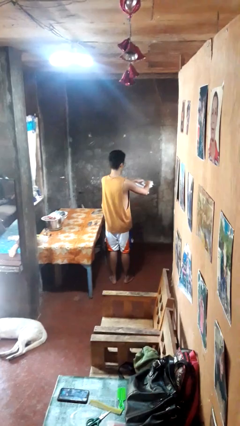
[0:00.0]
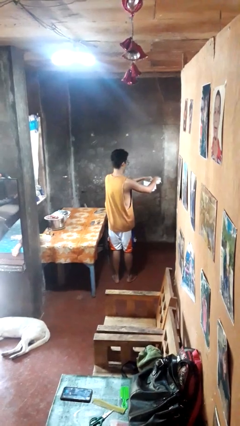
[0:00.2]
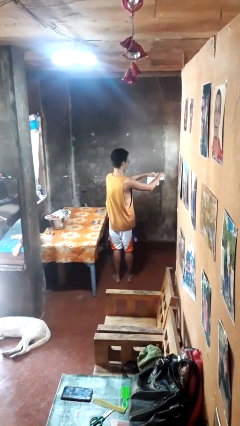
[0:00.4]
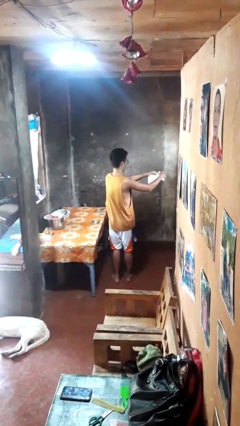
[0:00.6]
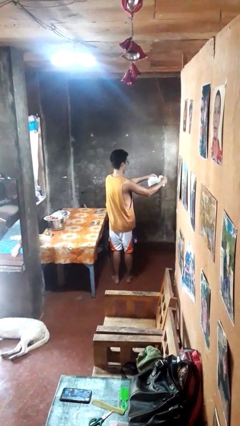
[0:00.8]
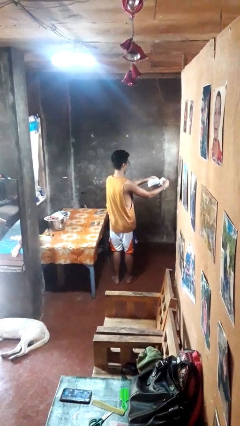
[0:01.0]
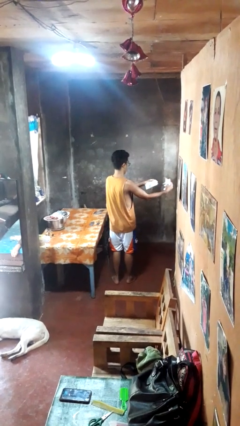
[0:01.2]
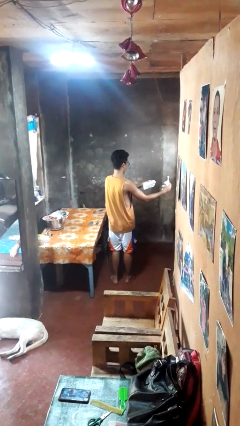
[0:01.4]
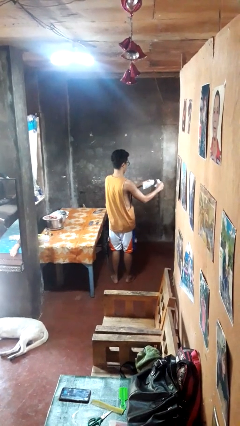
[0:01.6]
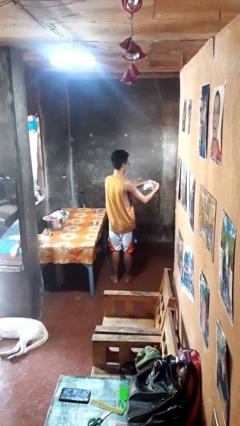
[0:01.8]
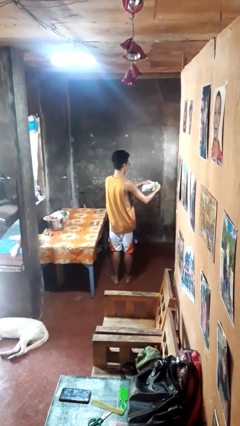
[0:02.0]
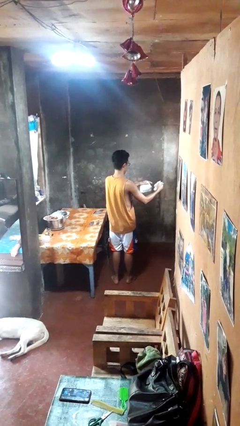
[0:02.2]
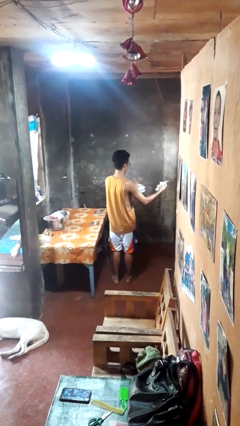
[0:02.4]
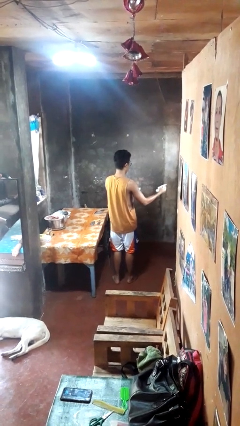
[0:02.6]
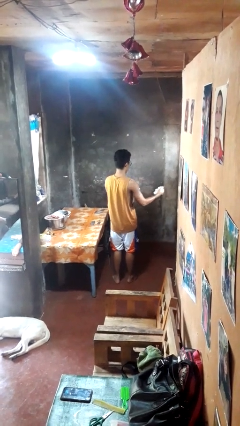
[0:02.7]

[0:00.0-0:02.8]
person tears paper

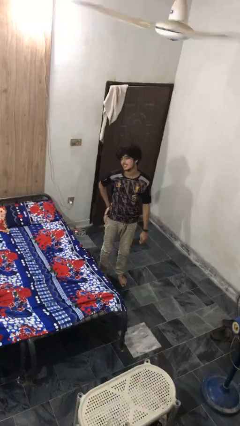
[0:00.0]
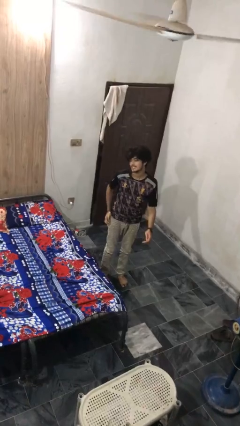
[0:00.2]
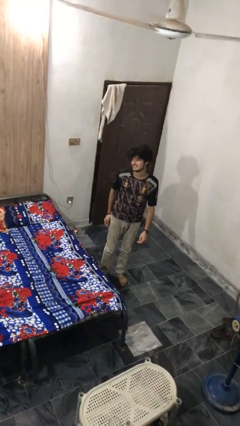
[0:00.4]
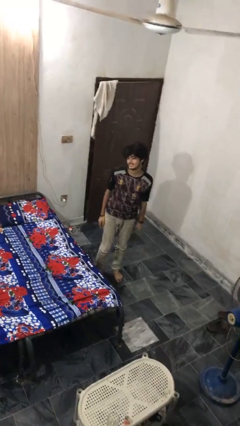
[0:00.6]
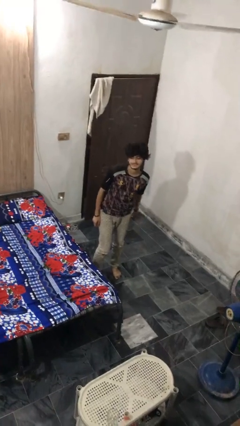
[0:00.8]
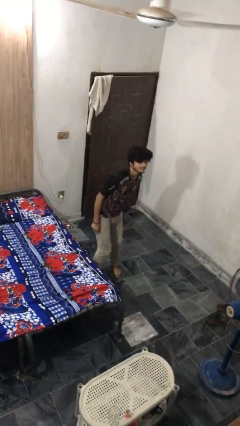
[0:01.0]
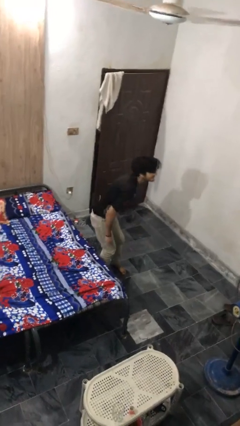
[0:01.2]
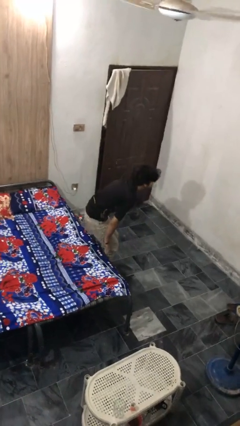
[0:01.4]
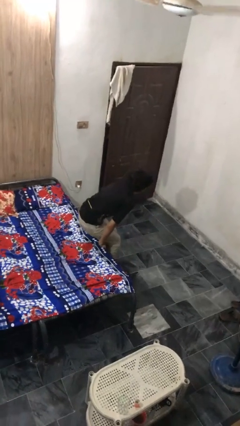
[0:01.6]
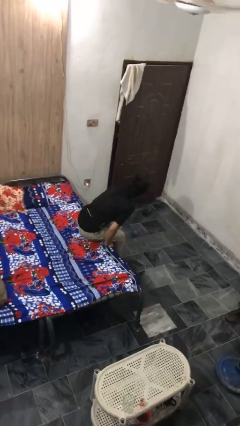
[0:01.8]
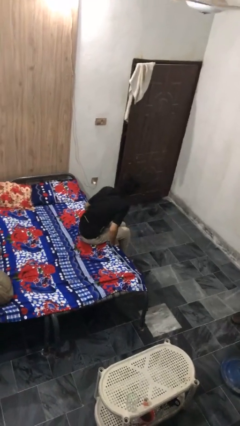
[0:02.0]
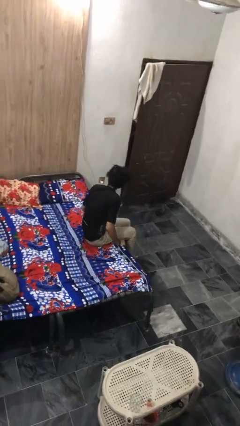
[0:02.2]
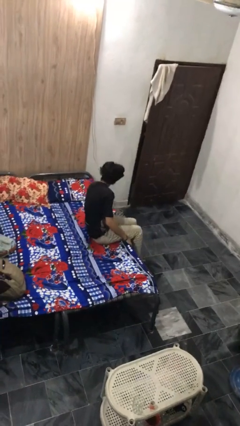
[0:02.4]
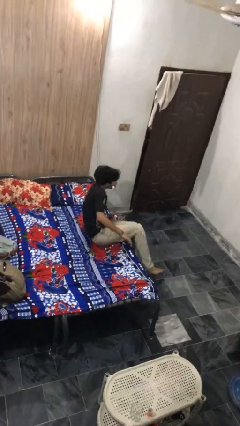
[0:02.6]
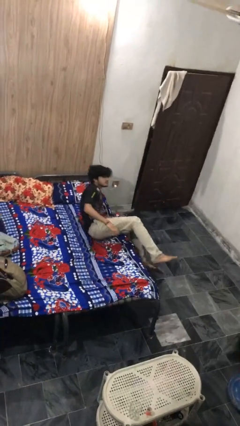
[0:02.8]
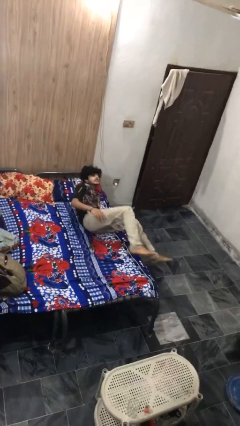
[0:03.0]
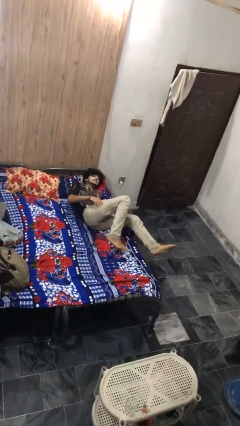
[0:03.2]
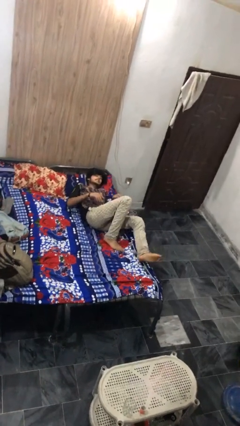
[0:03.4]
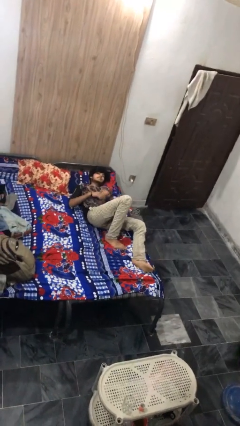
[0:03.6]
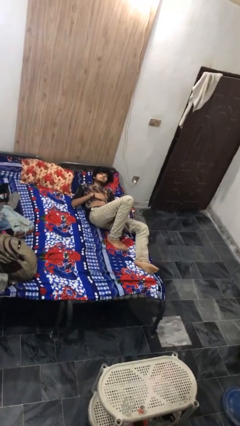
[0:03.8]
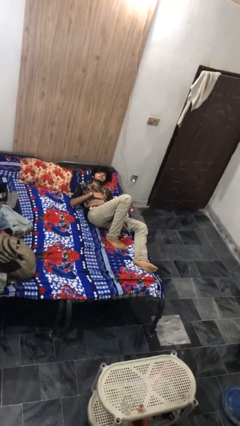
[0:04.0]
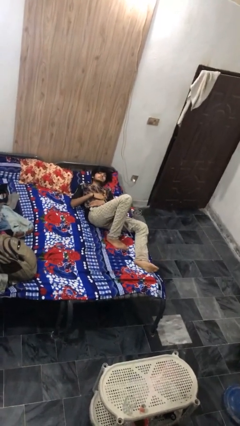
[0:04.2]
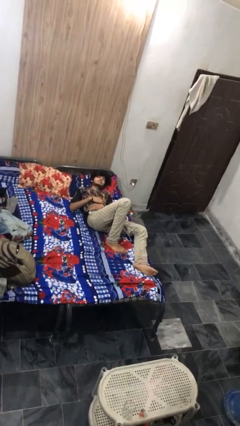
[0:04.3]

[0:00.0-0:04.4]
person lies down on bed

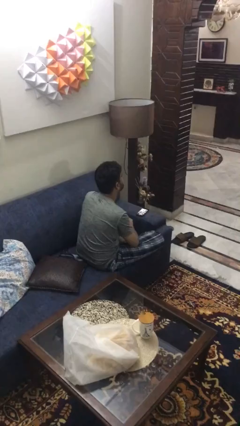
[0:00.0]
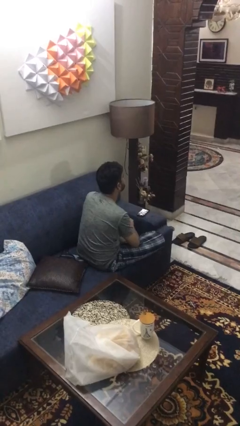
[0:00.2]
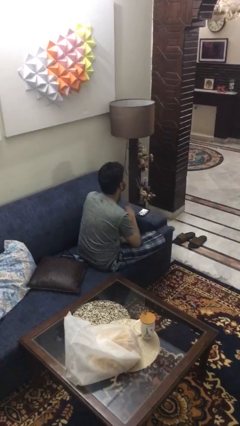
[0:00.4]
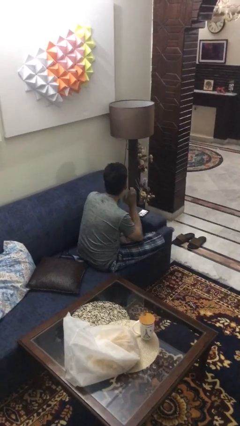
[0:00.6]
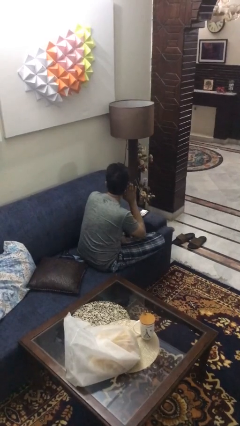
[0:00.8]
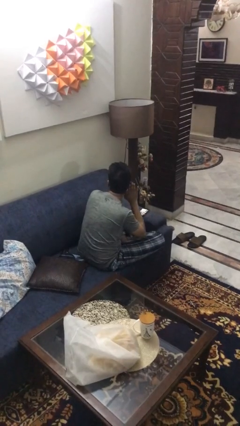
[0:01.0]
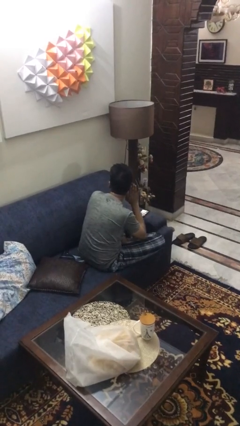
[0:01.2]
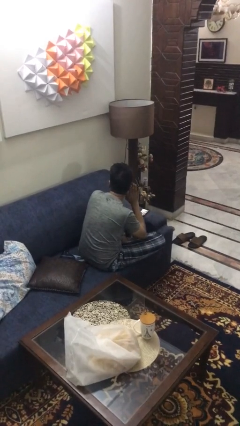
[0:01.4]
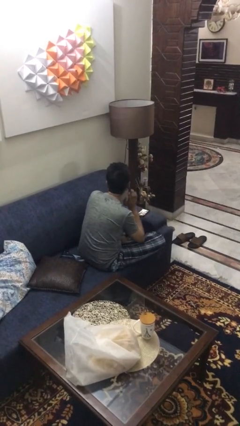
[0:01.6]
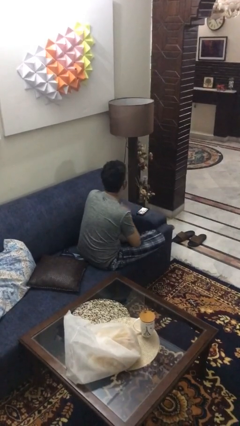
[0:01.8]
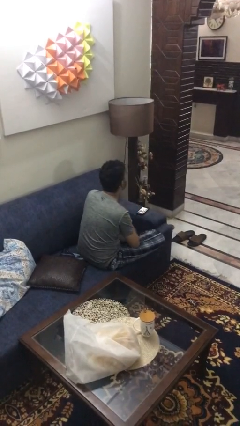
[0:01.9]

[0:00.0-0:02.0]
person gestures listen closely

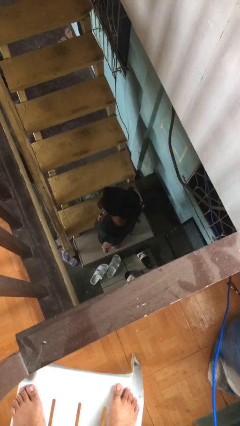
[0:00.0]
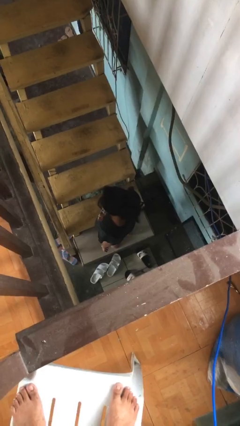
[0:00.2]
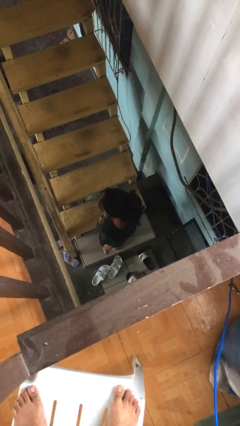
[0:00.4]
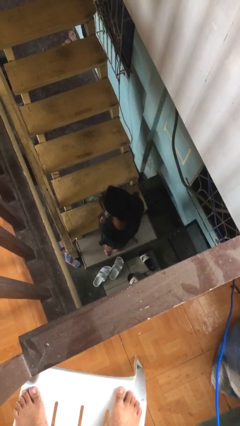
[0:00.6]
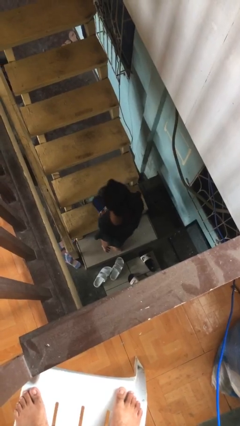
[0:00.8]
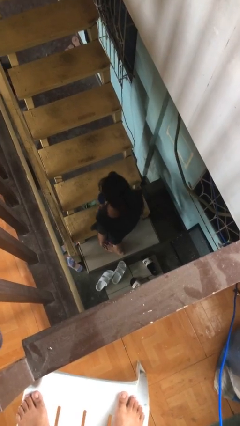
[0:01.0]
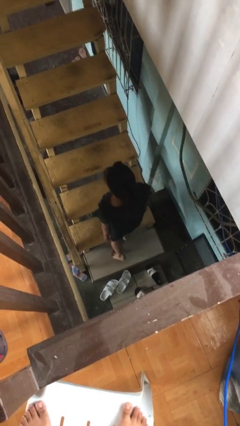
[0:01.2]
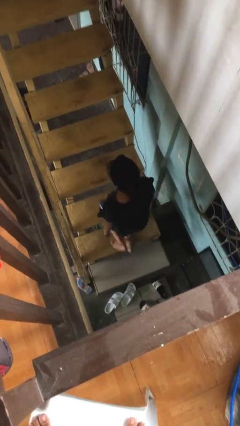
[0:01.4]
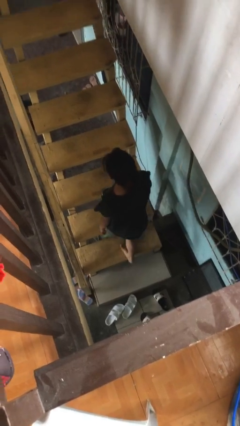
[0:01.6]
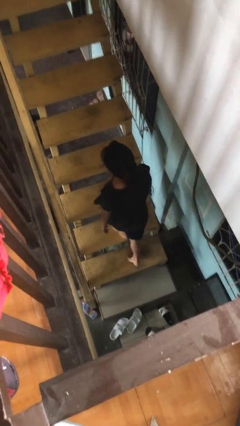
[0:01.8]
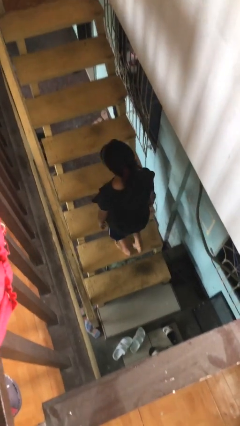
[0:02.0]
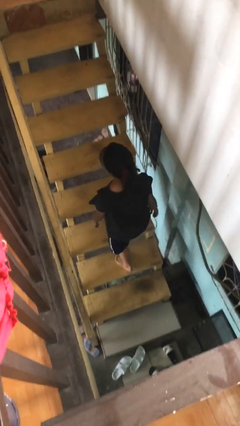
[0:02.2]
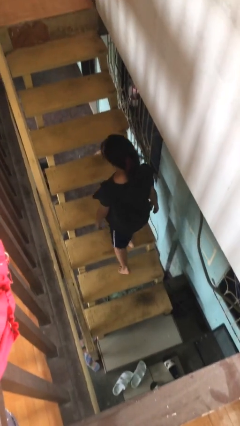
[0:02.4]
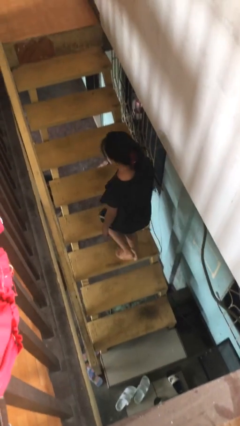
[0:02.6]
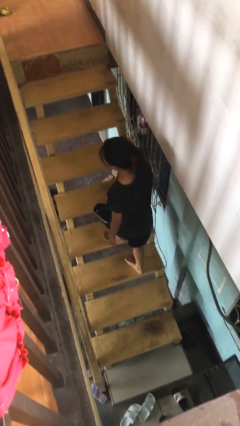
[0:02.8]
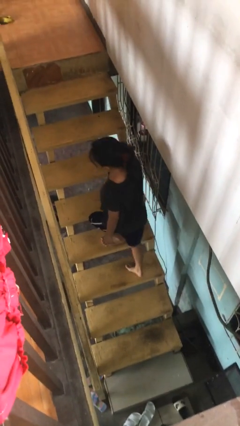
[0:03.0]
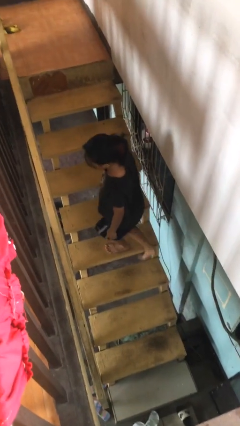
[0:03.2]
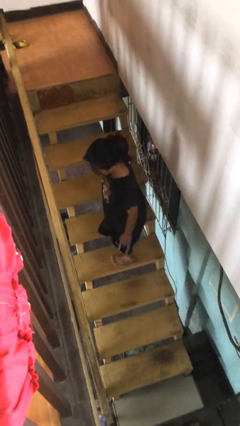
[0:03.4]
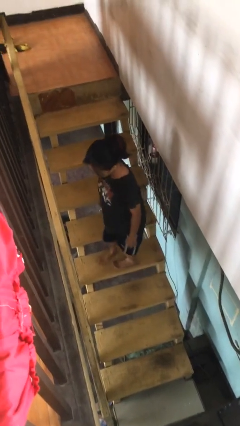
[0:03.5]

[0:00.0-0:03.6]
person climbs up stairs

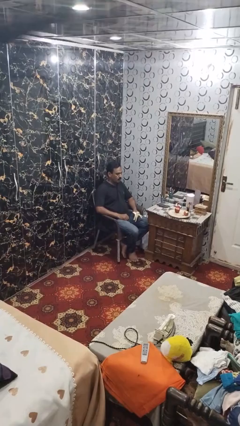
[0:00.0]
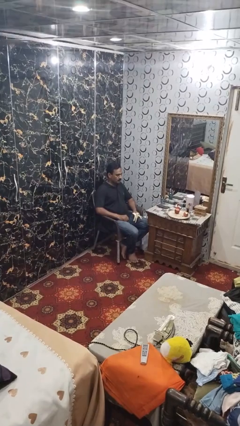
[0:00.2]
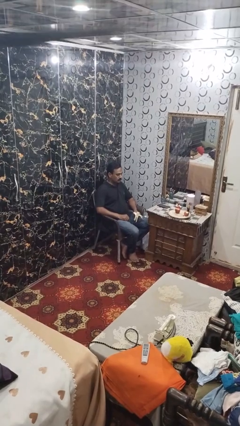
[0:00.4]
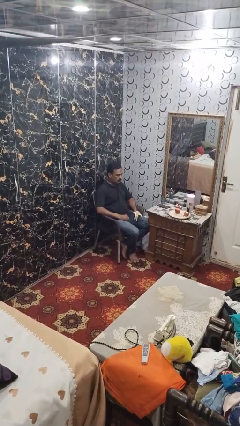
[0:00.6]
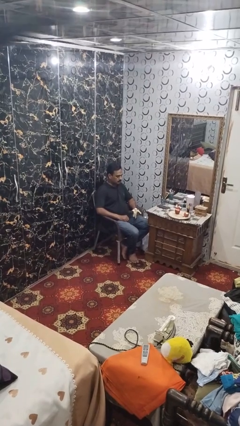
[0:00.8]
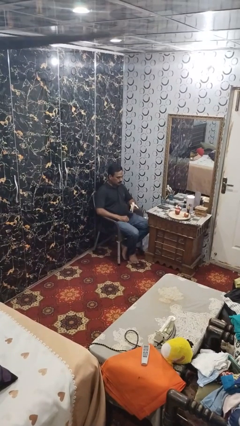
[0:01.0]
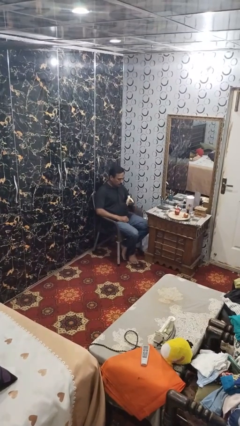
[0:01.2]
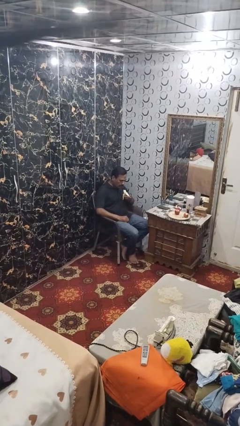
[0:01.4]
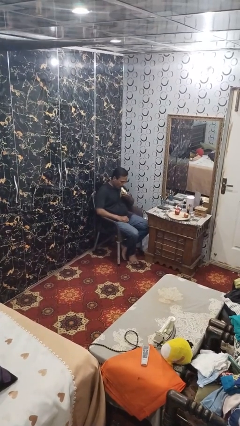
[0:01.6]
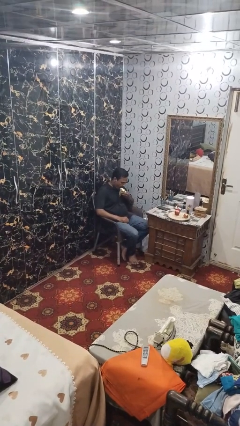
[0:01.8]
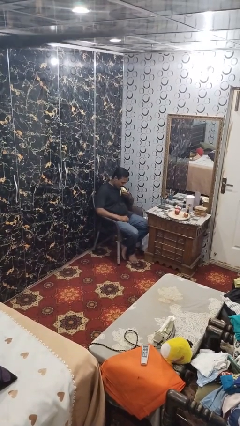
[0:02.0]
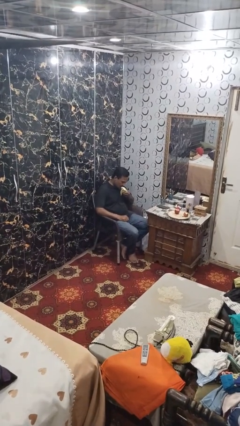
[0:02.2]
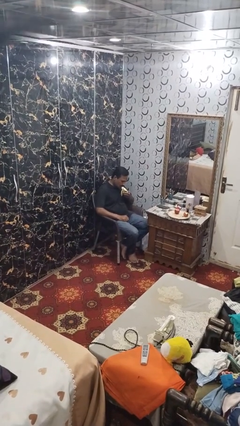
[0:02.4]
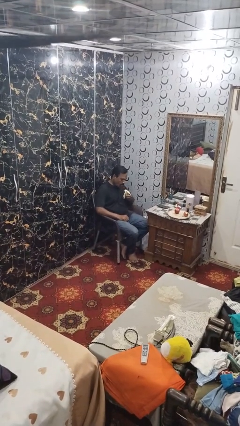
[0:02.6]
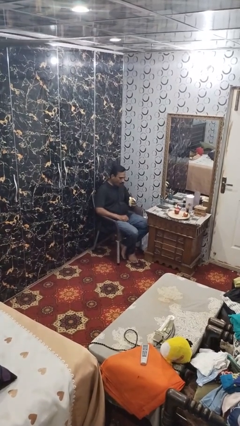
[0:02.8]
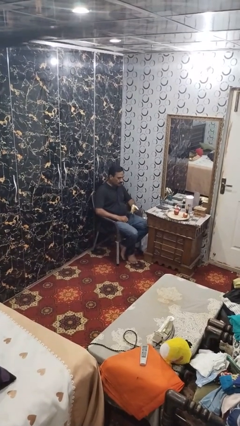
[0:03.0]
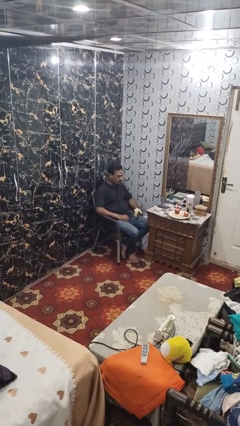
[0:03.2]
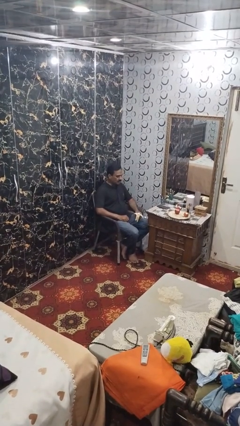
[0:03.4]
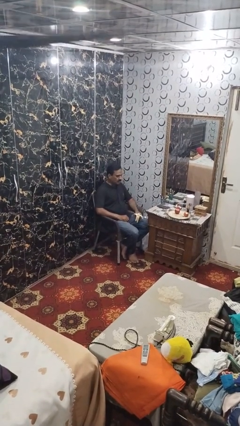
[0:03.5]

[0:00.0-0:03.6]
person eats banana

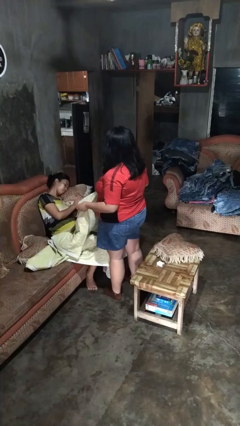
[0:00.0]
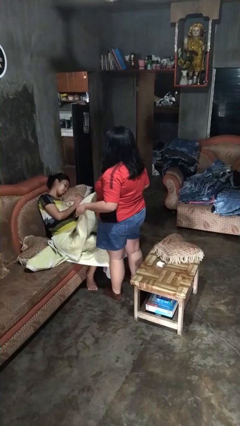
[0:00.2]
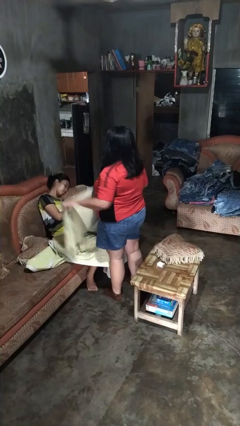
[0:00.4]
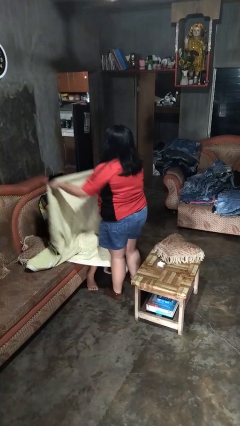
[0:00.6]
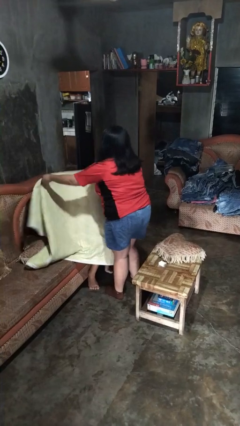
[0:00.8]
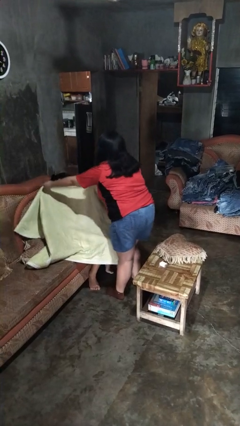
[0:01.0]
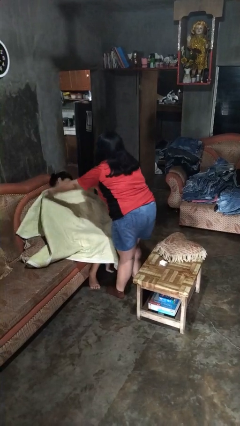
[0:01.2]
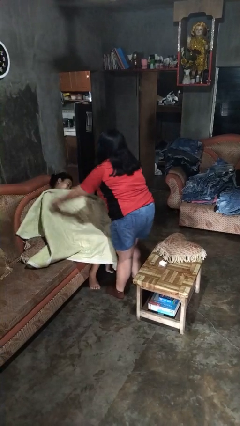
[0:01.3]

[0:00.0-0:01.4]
person covers friend with blanket
